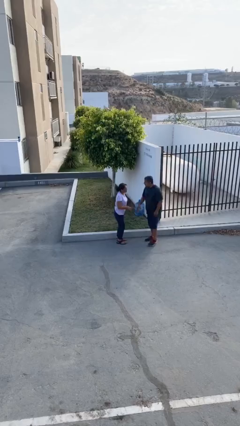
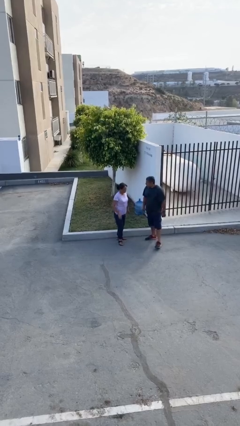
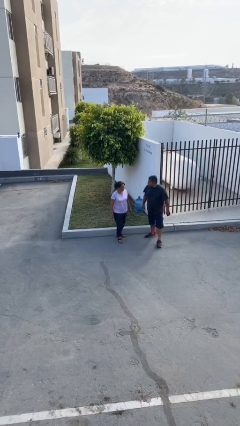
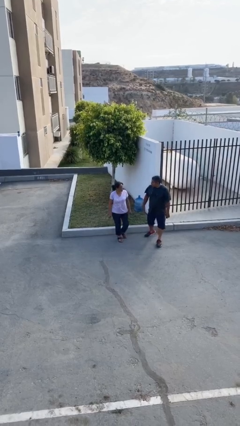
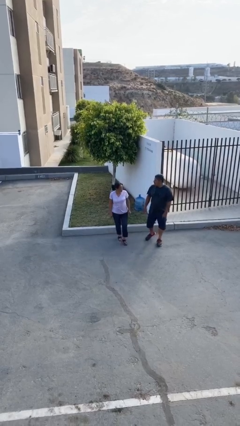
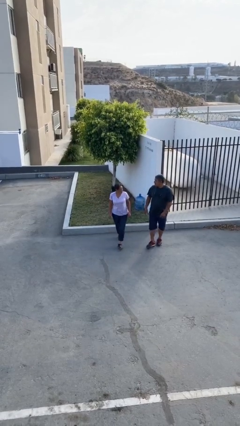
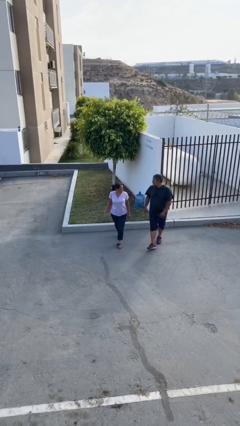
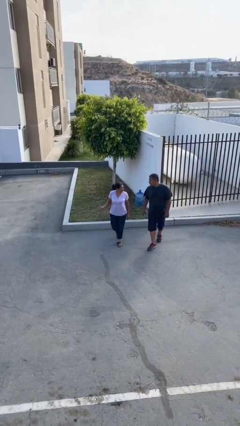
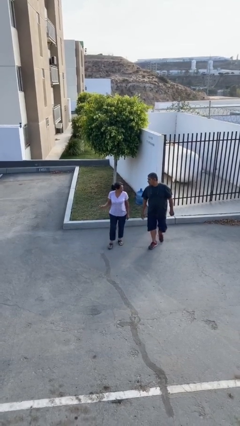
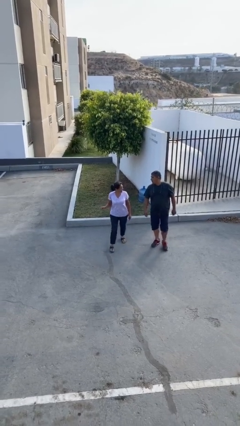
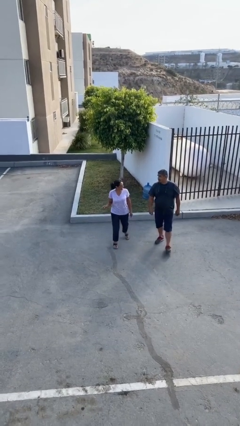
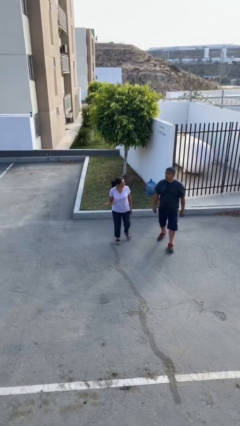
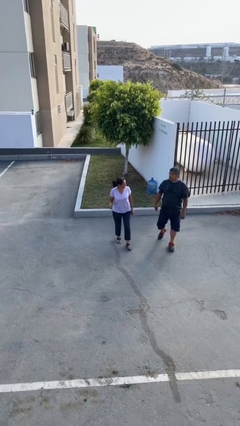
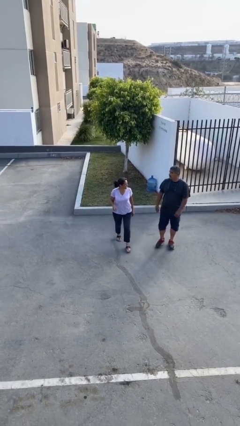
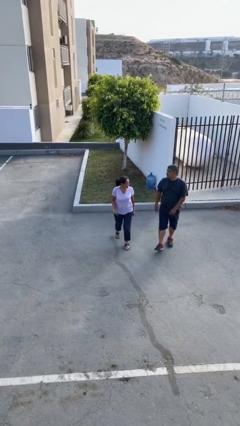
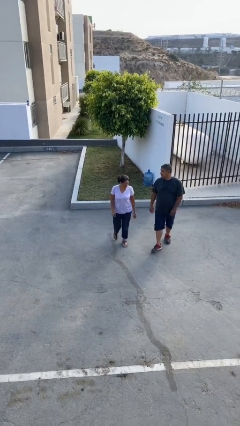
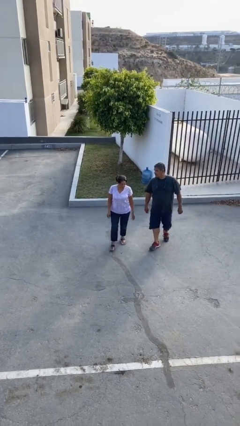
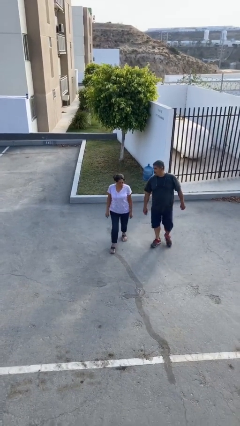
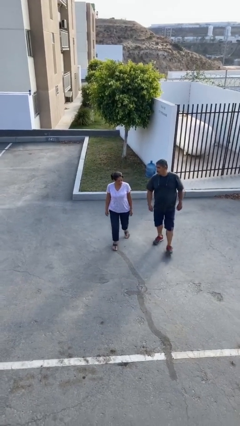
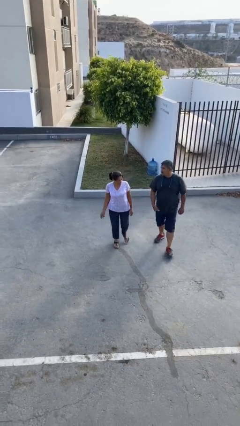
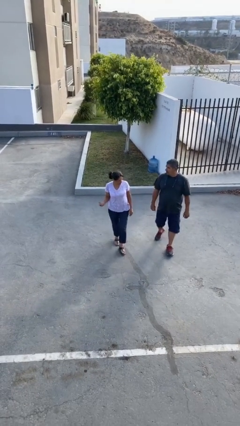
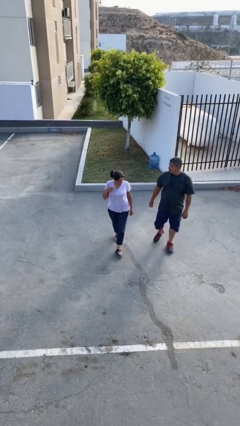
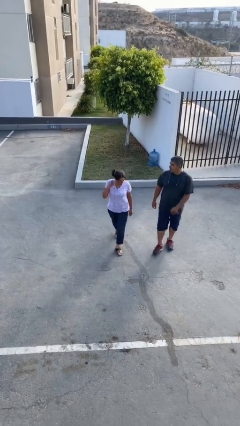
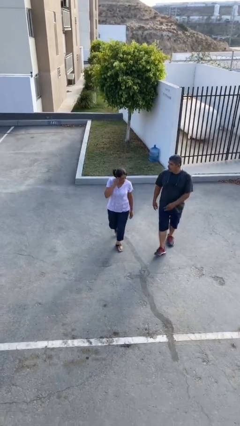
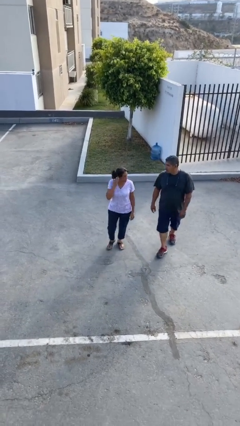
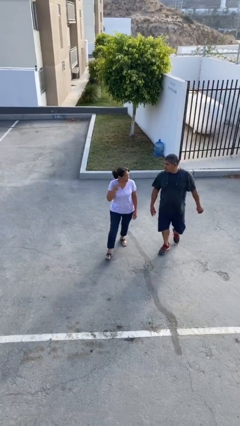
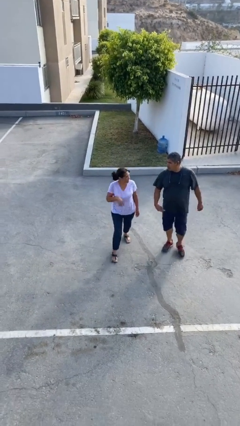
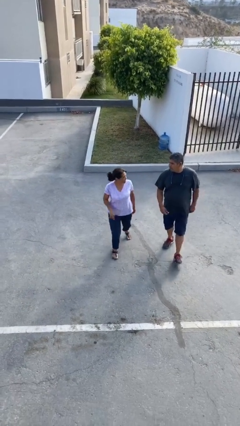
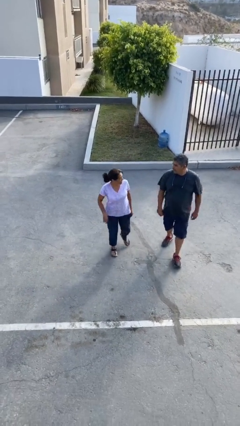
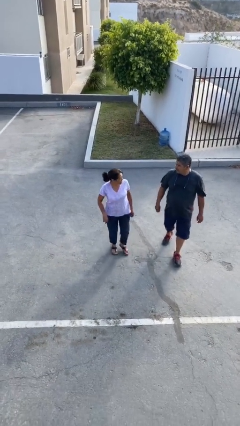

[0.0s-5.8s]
person talks to person

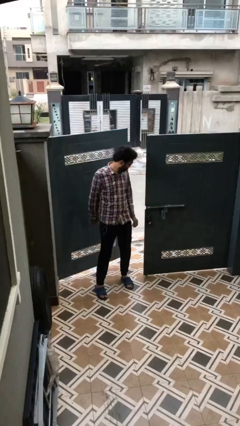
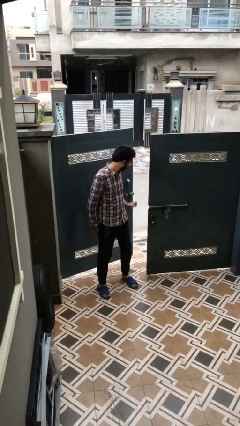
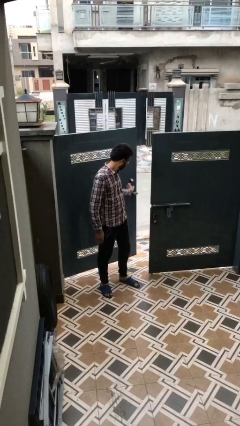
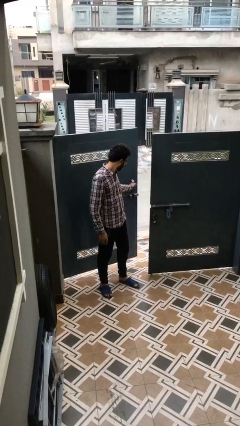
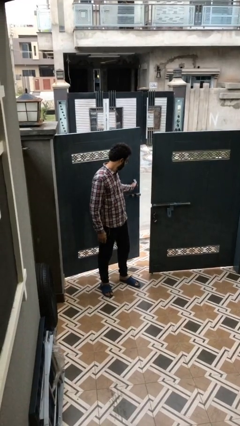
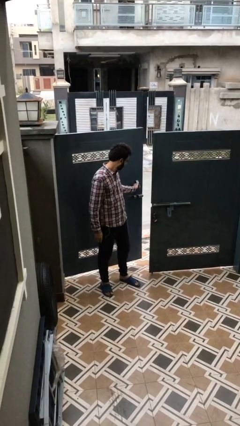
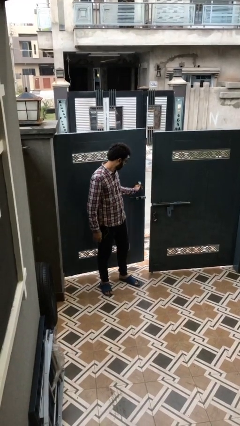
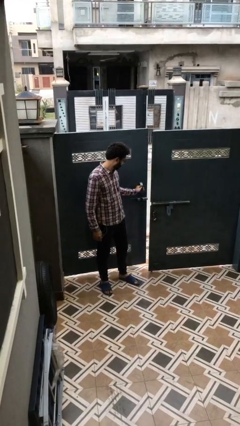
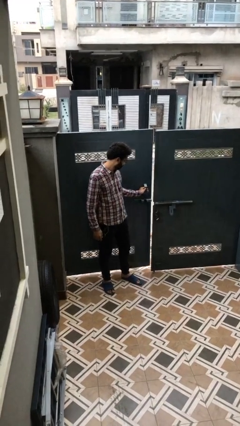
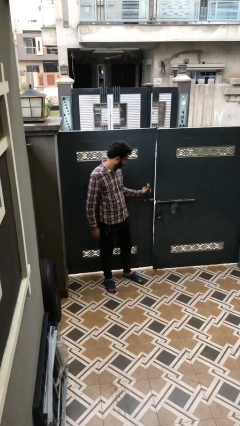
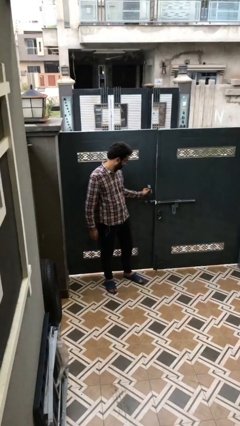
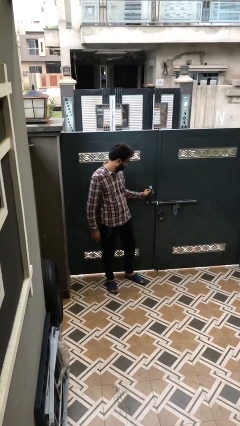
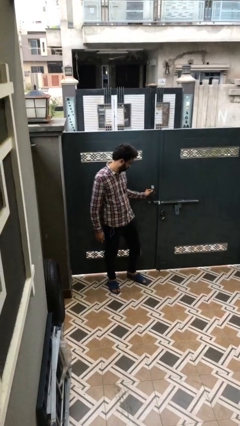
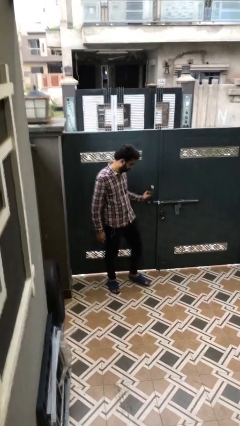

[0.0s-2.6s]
person closes facility door

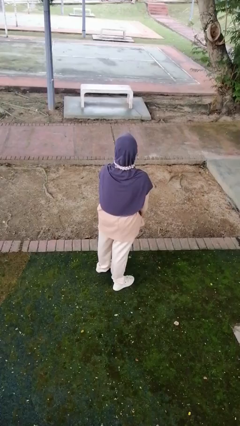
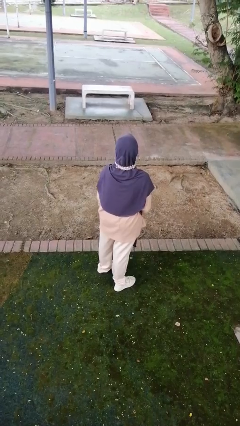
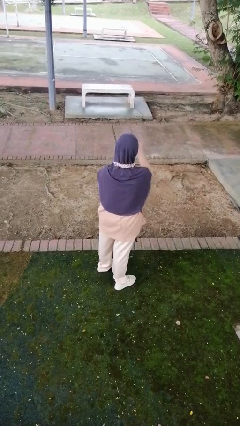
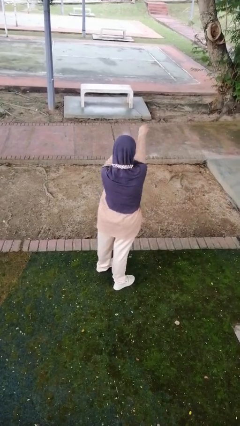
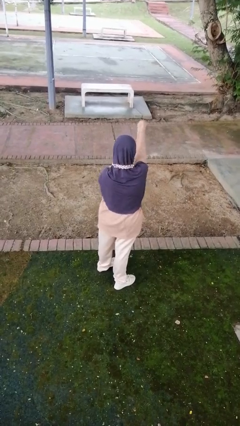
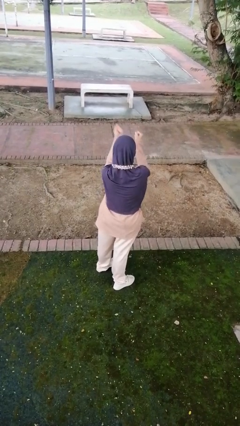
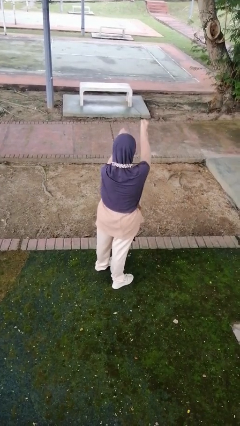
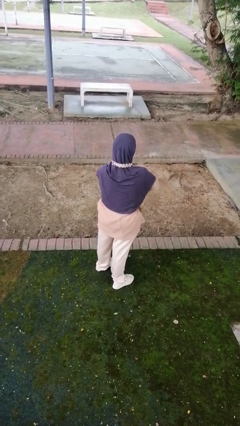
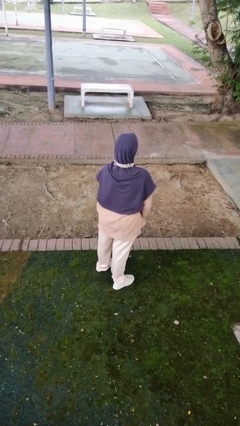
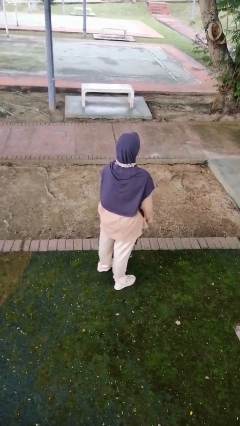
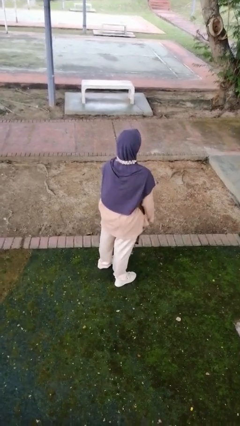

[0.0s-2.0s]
person punches

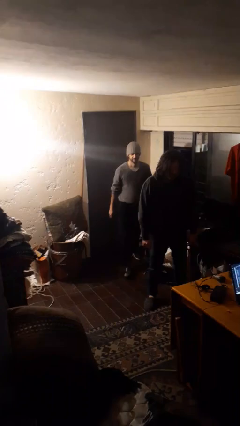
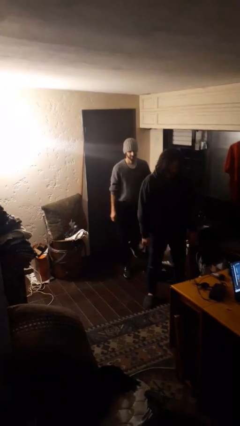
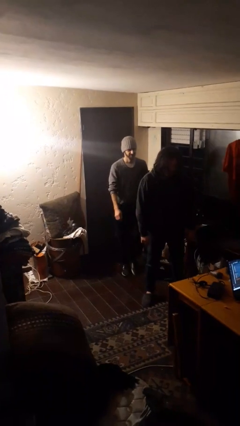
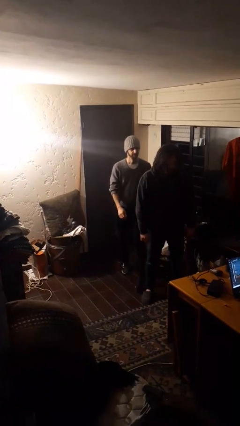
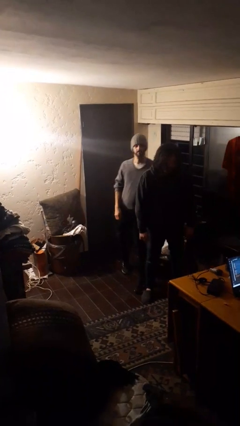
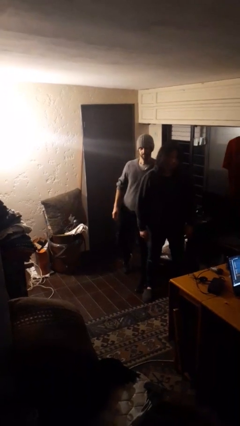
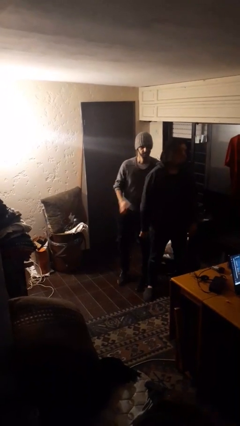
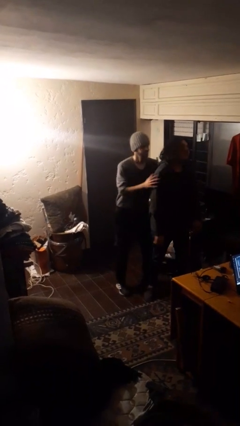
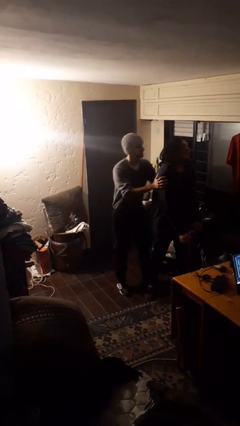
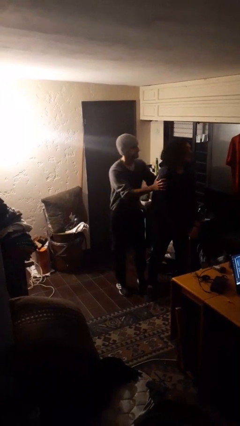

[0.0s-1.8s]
person bumps into person

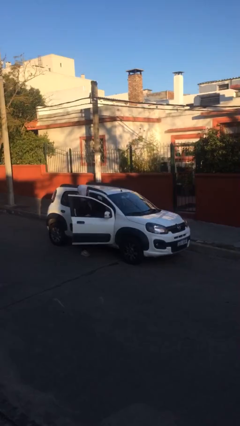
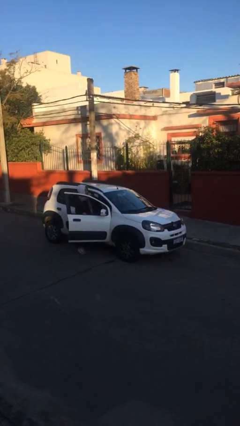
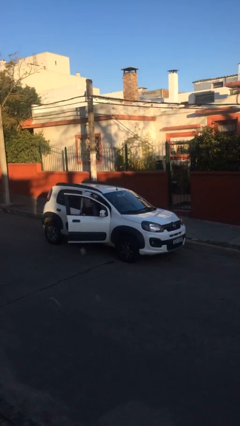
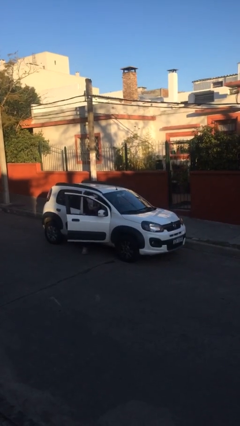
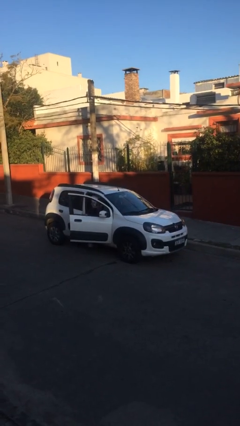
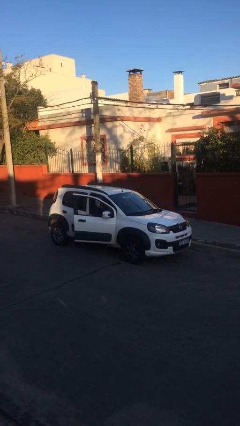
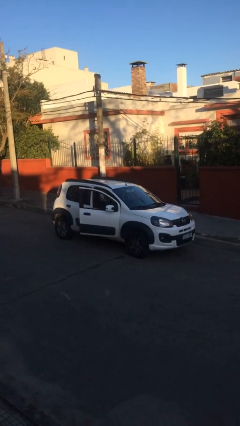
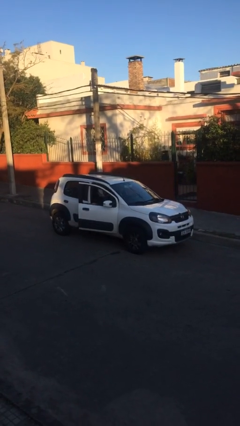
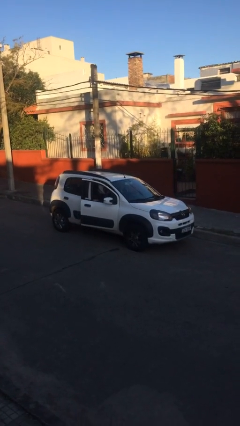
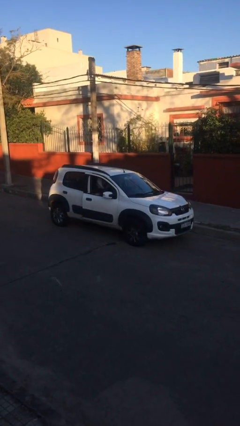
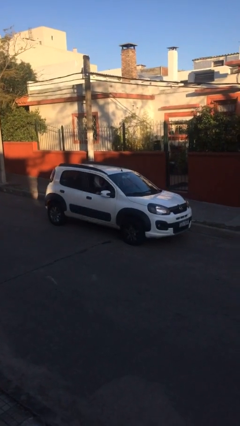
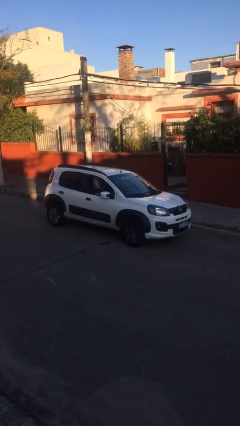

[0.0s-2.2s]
car picks up person

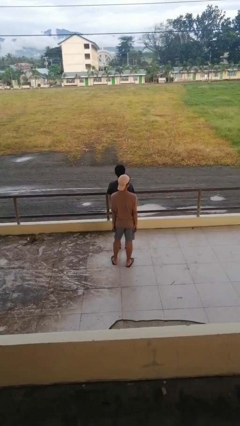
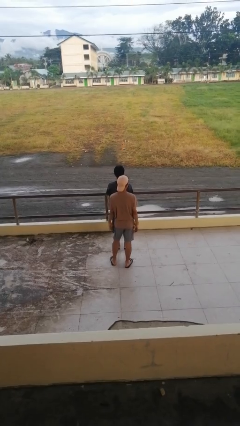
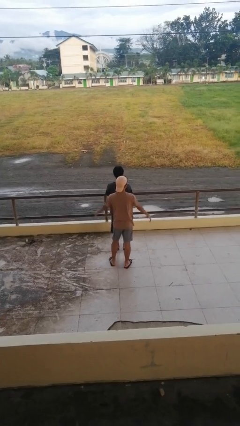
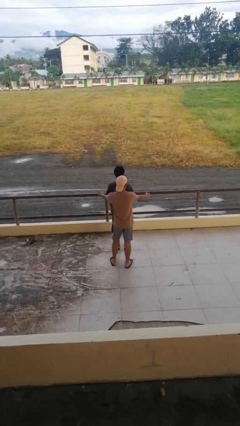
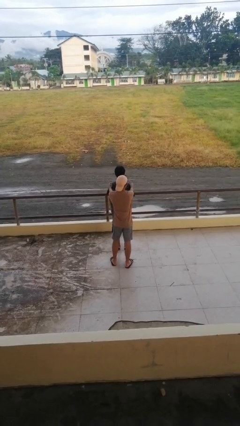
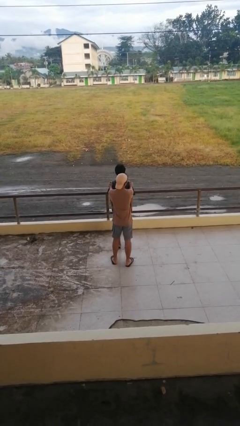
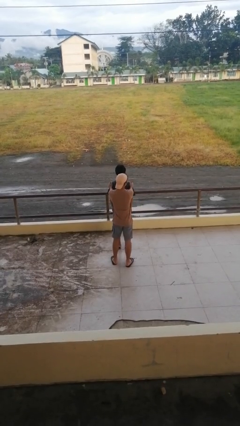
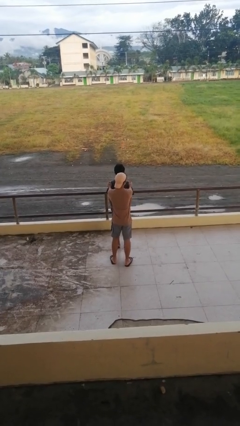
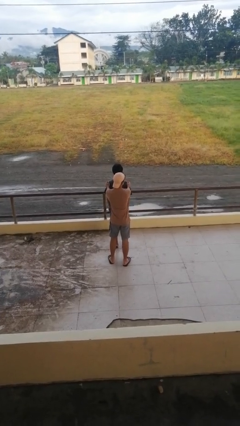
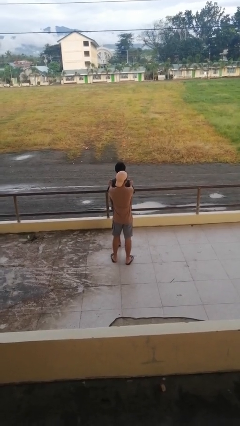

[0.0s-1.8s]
person pounds shoulders of person

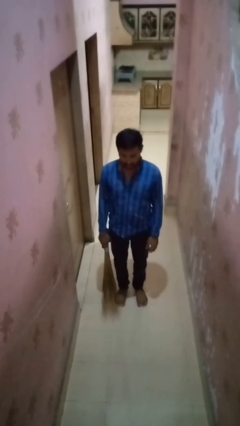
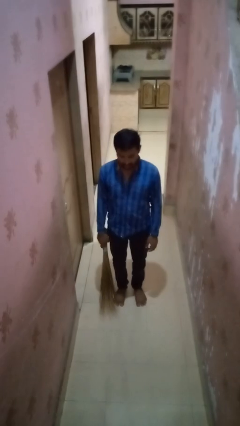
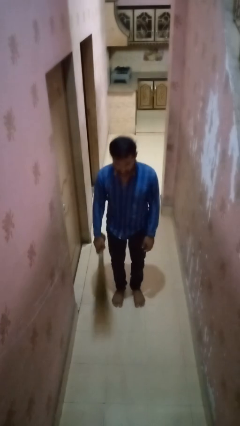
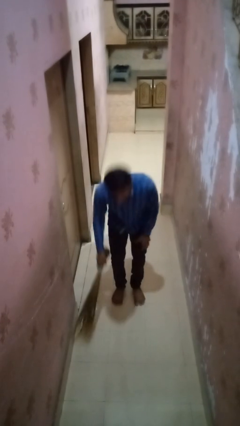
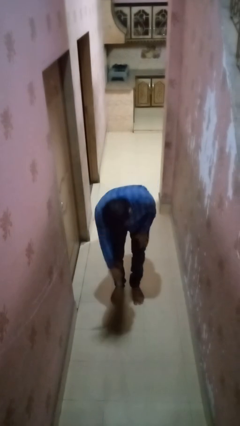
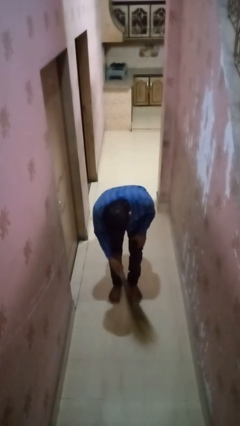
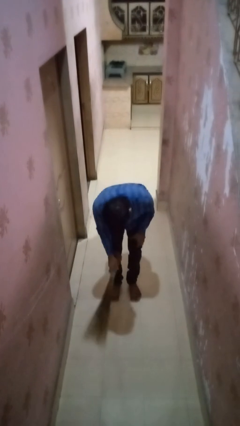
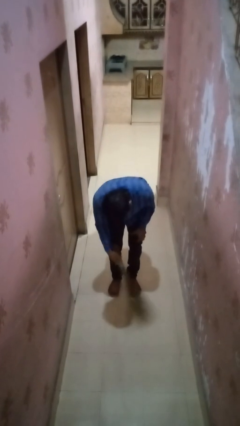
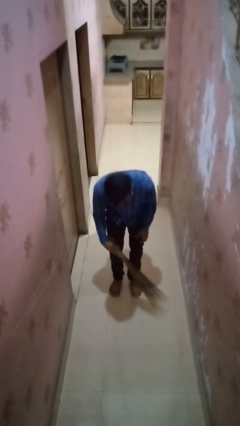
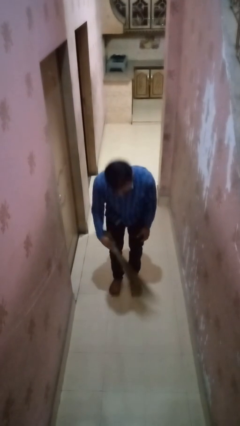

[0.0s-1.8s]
person sweeps floor
